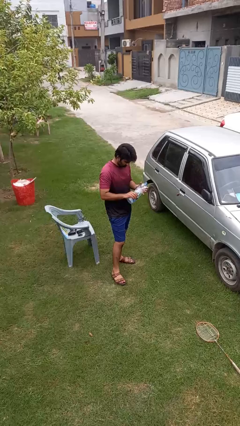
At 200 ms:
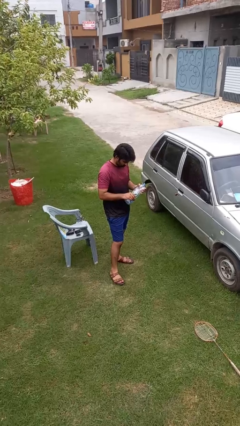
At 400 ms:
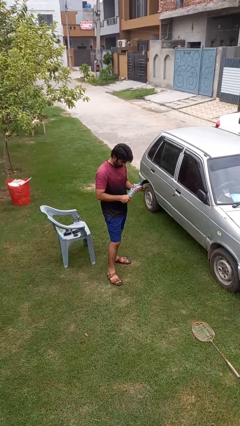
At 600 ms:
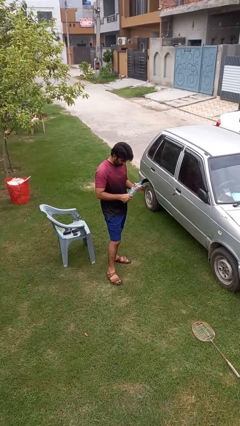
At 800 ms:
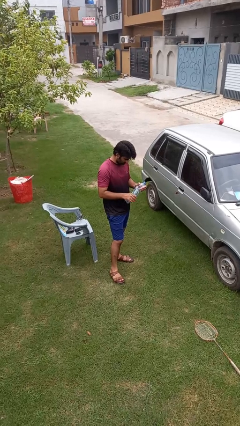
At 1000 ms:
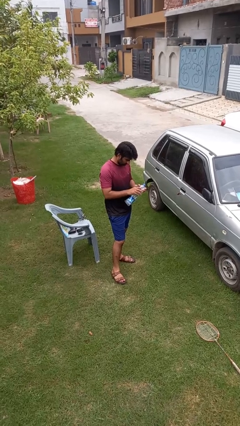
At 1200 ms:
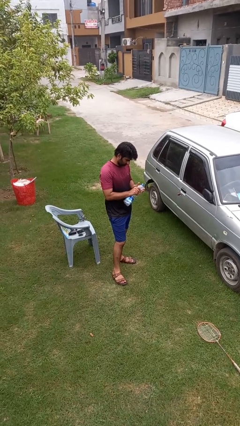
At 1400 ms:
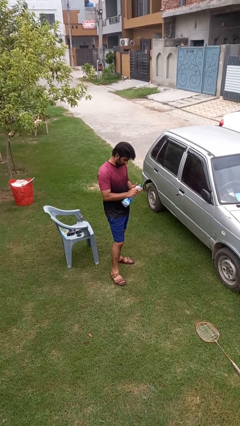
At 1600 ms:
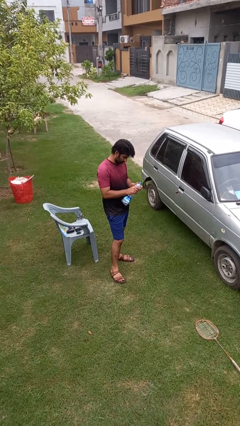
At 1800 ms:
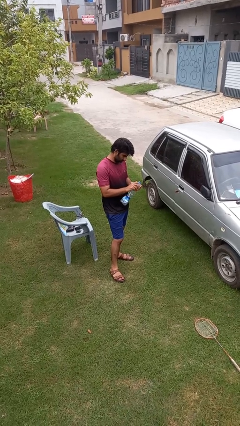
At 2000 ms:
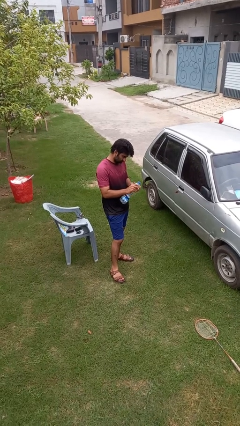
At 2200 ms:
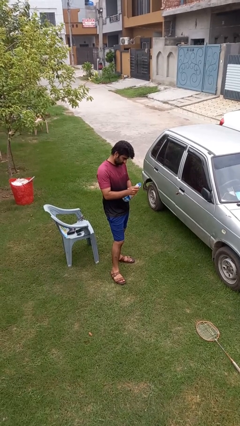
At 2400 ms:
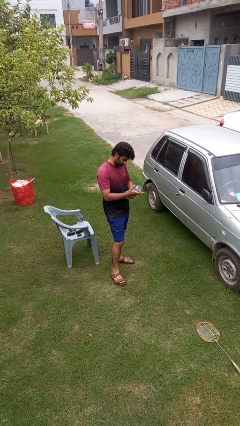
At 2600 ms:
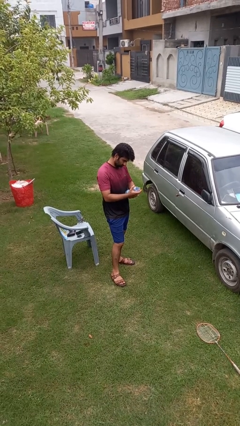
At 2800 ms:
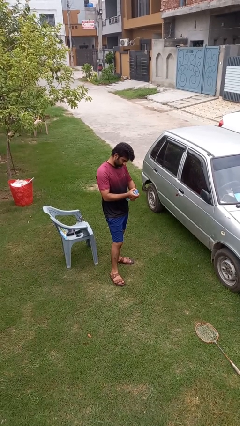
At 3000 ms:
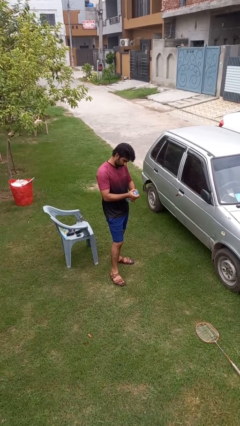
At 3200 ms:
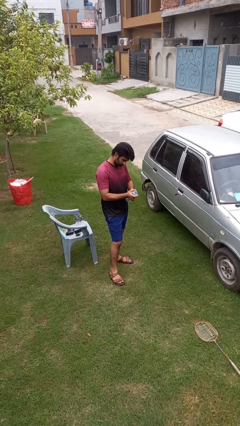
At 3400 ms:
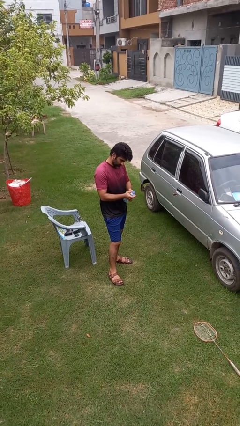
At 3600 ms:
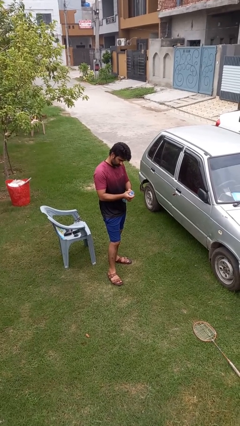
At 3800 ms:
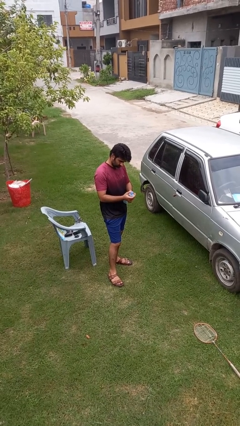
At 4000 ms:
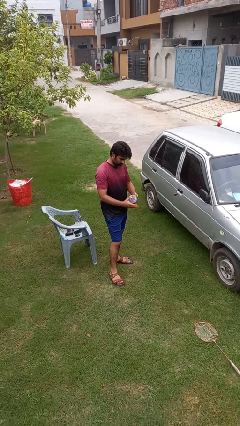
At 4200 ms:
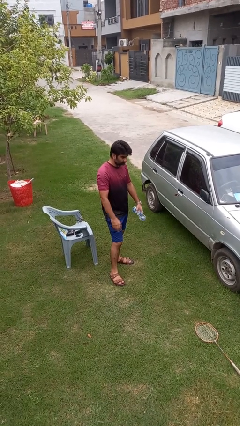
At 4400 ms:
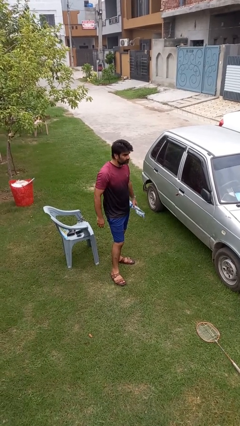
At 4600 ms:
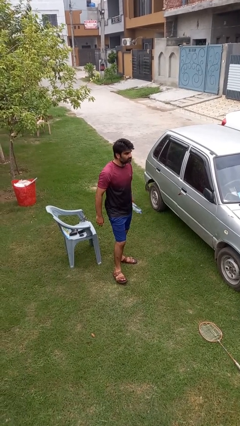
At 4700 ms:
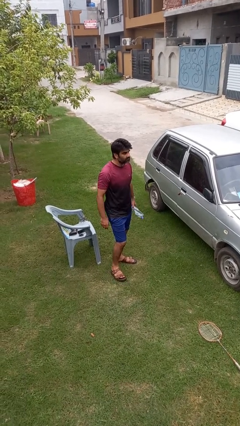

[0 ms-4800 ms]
person squeezes object

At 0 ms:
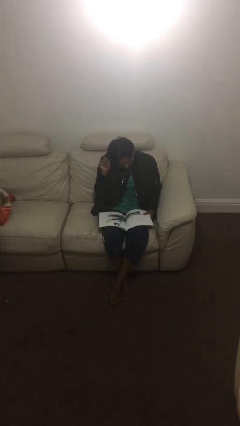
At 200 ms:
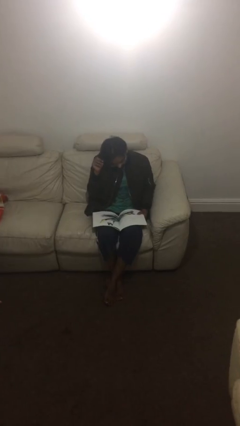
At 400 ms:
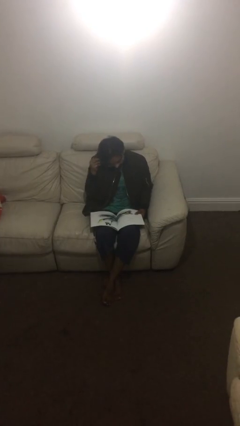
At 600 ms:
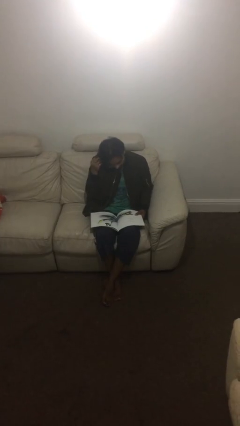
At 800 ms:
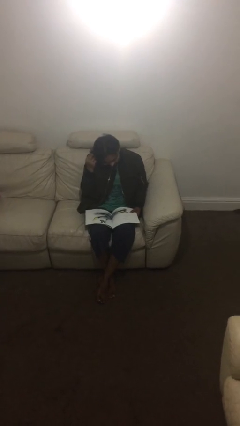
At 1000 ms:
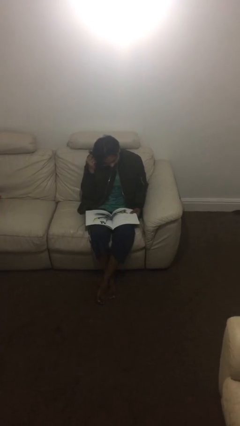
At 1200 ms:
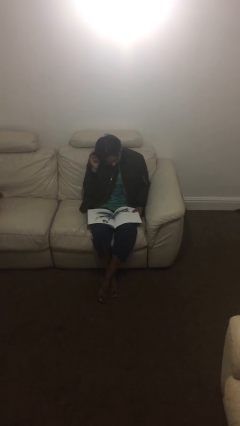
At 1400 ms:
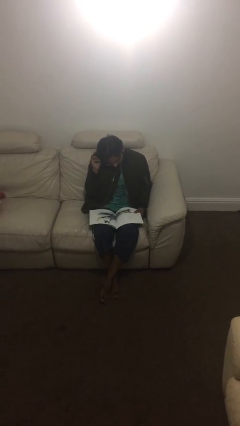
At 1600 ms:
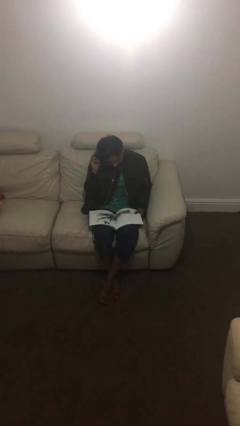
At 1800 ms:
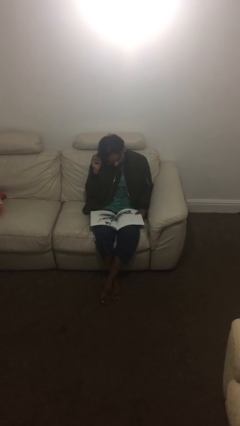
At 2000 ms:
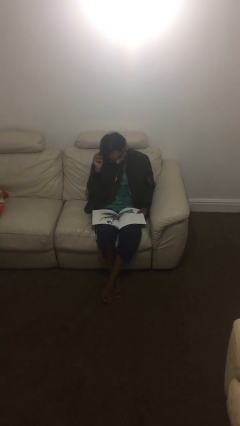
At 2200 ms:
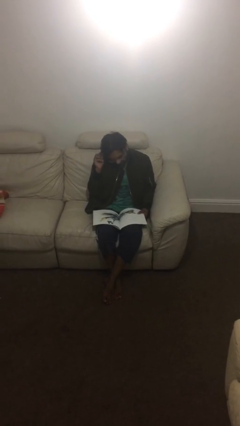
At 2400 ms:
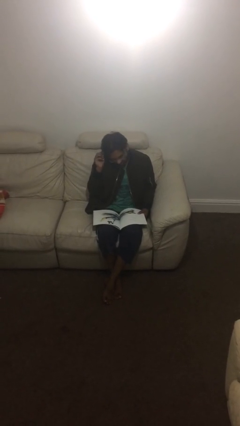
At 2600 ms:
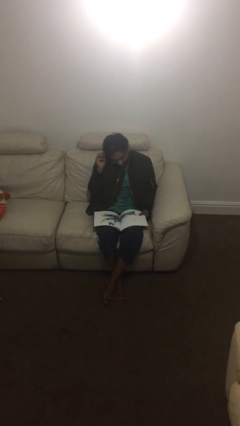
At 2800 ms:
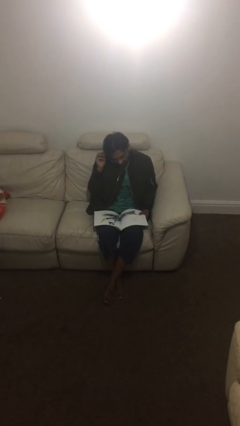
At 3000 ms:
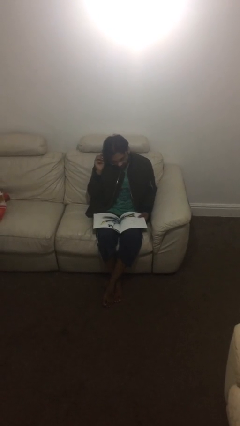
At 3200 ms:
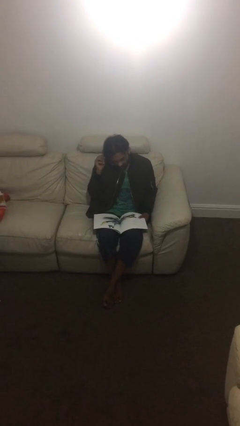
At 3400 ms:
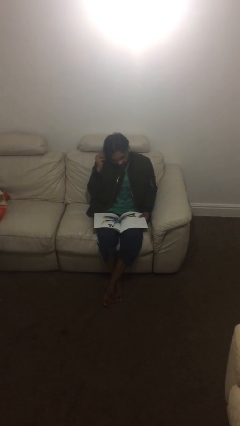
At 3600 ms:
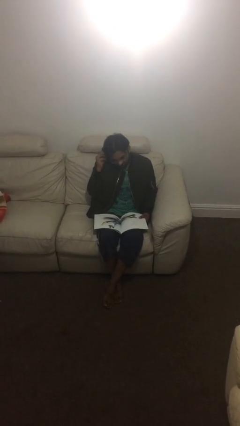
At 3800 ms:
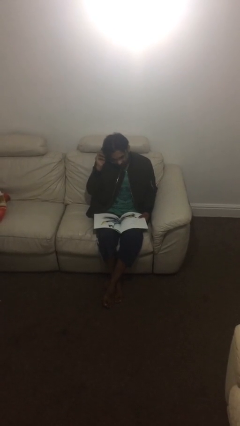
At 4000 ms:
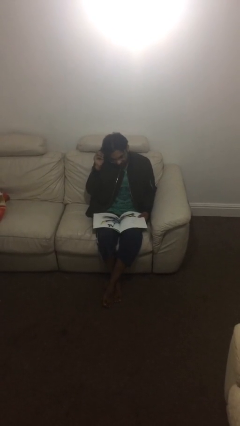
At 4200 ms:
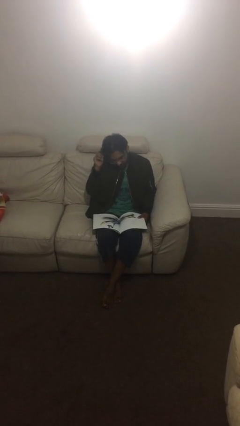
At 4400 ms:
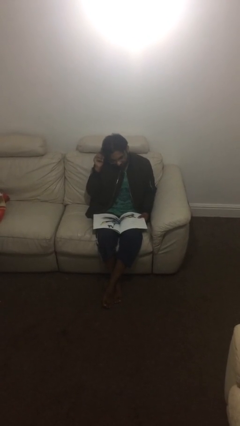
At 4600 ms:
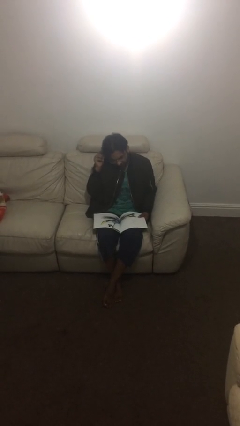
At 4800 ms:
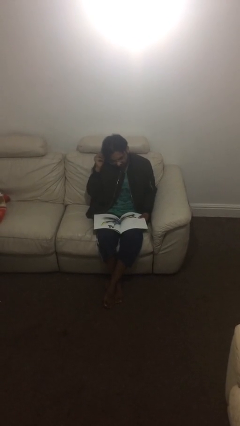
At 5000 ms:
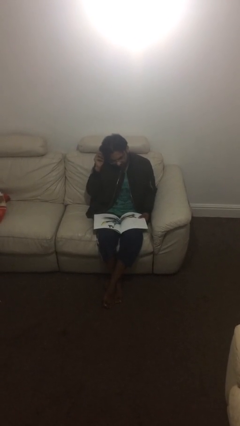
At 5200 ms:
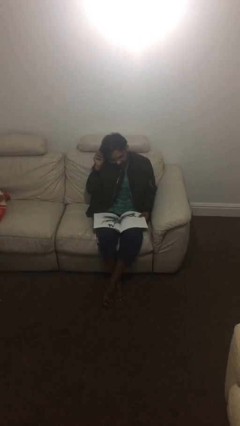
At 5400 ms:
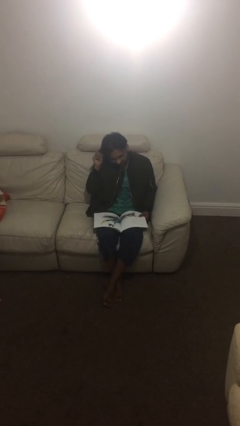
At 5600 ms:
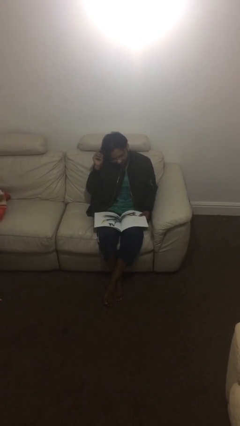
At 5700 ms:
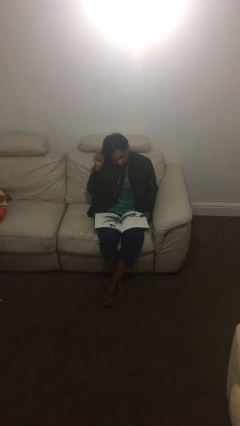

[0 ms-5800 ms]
person reads document

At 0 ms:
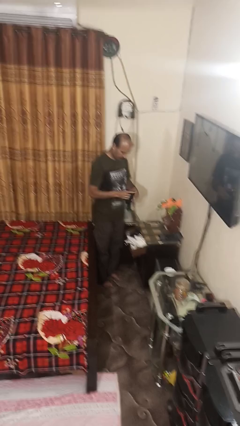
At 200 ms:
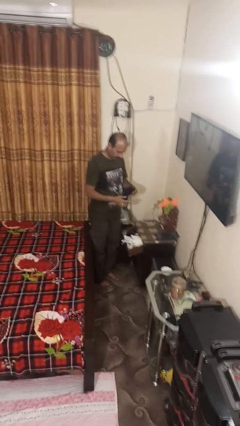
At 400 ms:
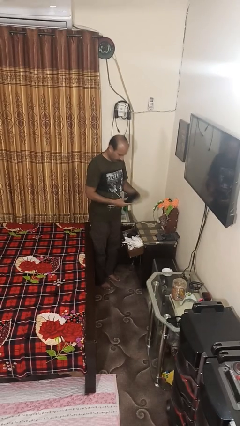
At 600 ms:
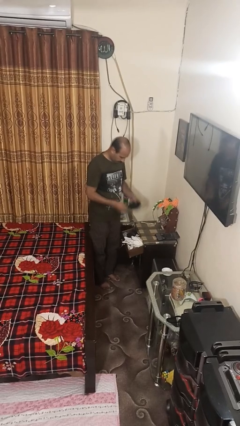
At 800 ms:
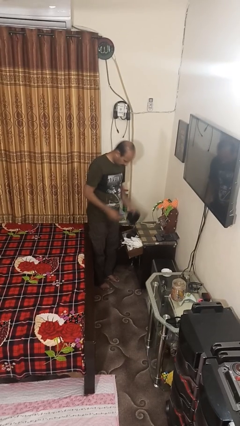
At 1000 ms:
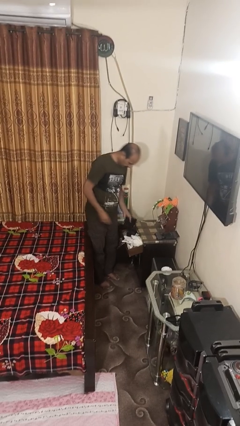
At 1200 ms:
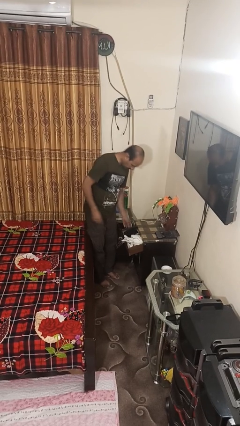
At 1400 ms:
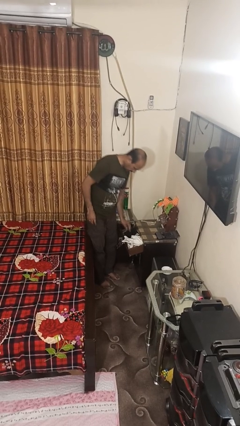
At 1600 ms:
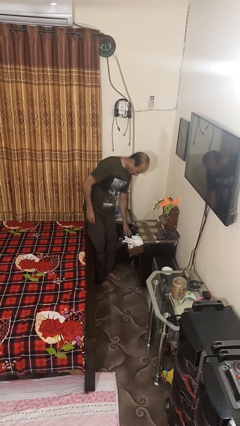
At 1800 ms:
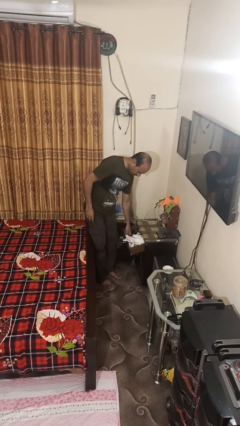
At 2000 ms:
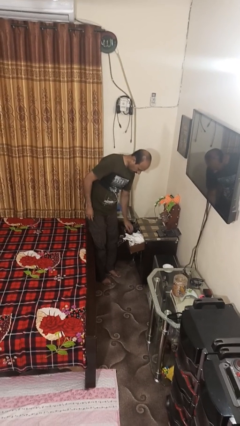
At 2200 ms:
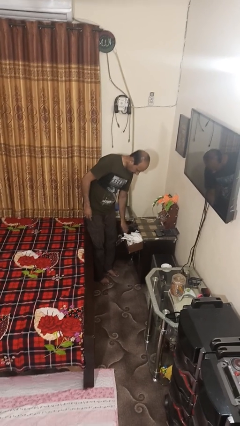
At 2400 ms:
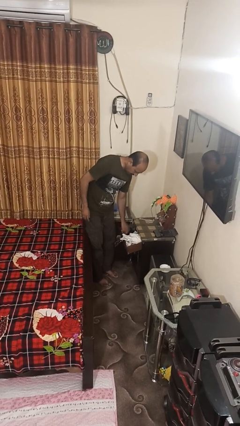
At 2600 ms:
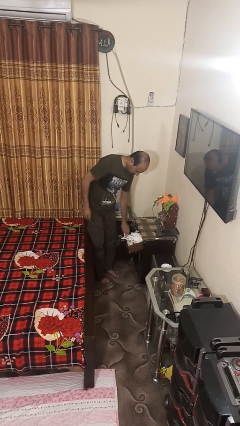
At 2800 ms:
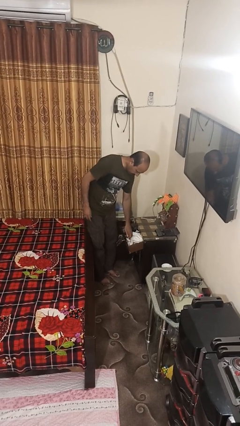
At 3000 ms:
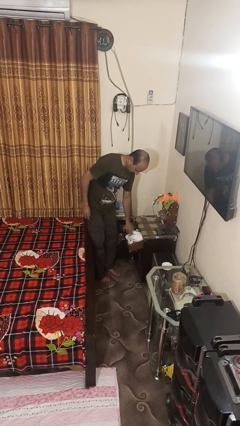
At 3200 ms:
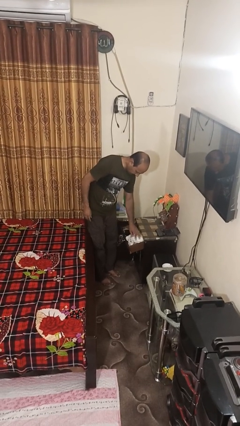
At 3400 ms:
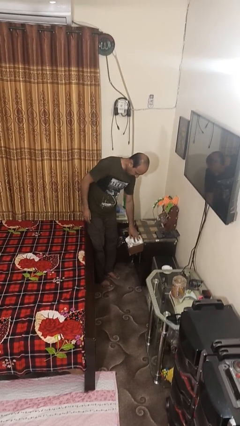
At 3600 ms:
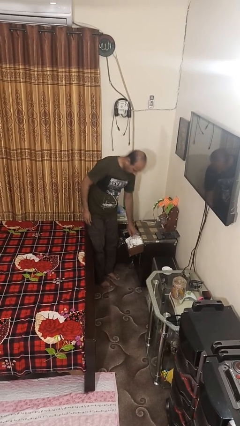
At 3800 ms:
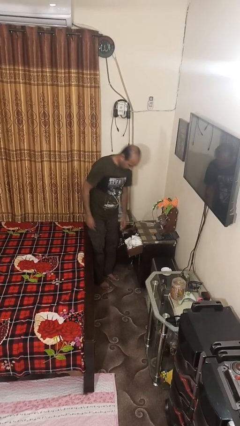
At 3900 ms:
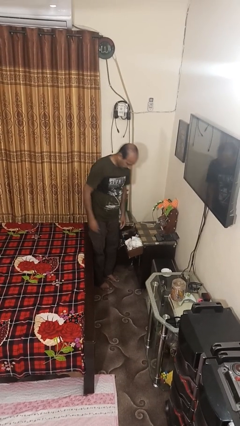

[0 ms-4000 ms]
person puts clothes into dresser

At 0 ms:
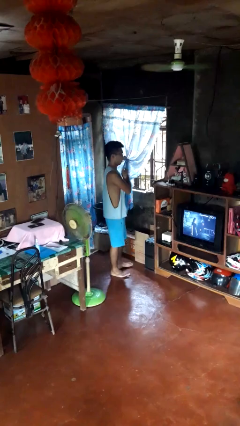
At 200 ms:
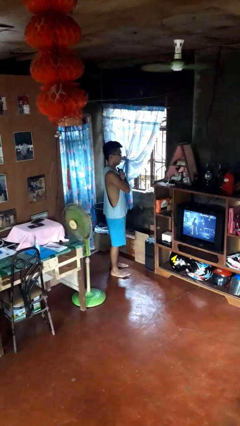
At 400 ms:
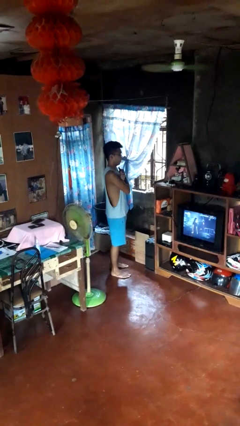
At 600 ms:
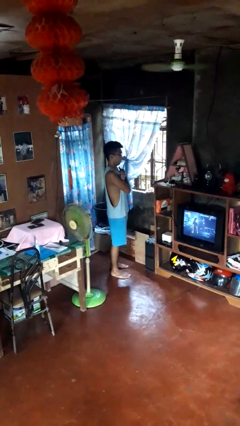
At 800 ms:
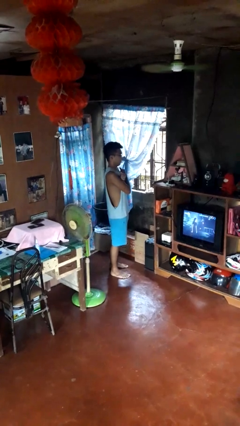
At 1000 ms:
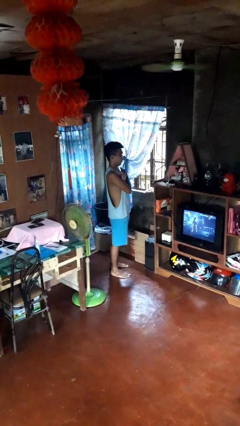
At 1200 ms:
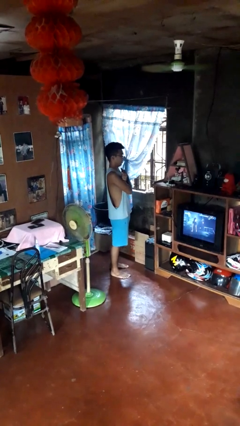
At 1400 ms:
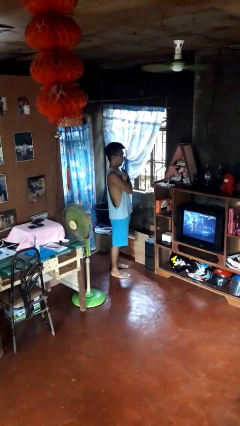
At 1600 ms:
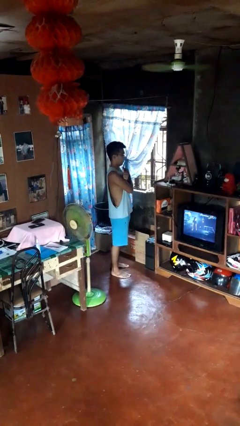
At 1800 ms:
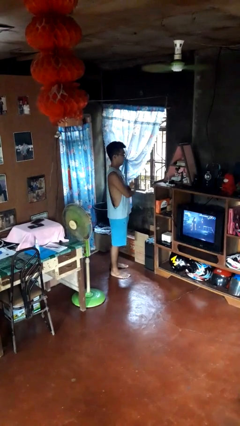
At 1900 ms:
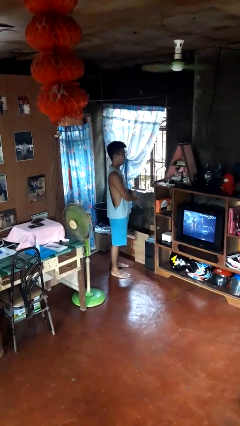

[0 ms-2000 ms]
person gestures arms x

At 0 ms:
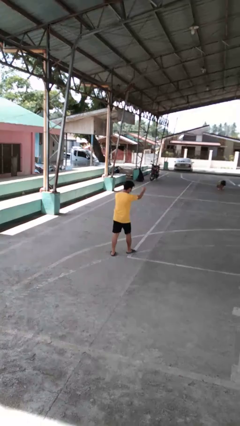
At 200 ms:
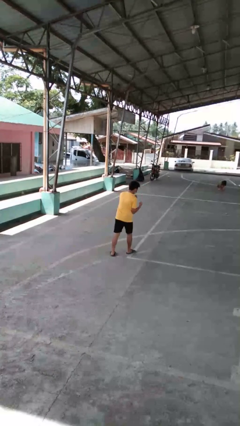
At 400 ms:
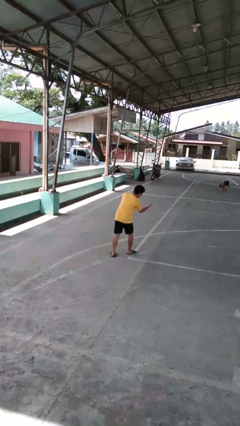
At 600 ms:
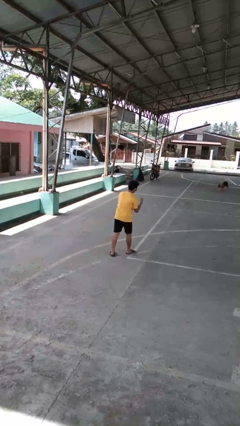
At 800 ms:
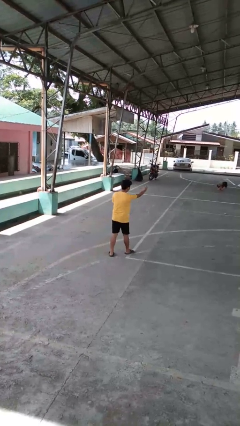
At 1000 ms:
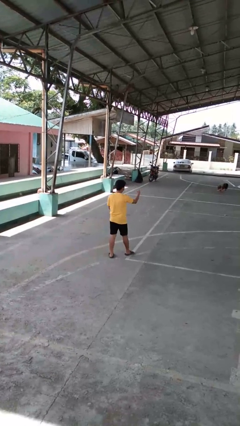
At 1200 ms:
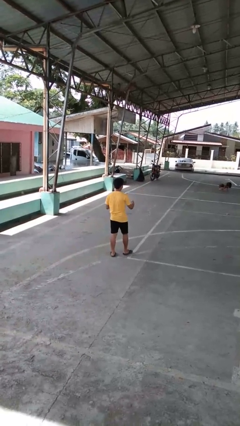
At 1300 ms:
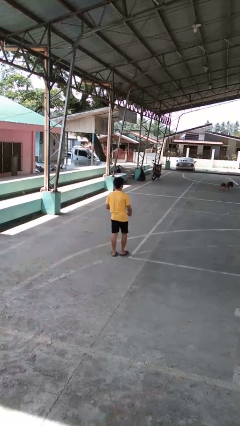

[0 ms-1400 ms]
person punches
